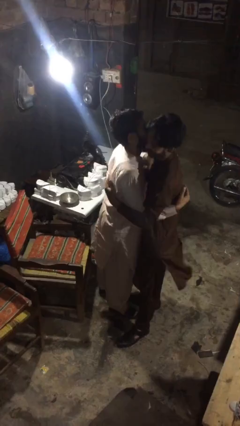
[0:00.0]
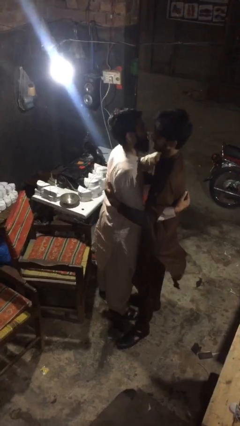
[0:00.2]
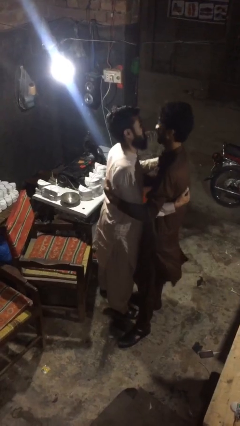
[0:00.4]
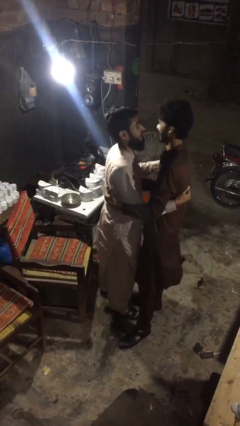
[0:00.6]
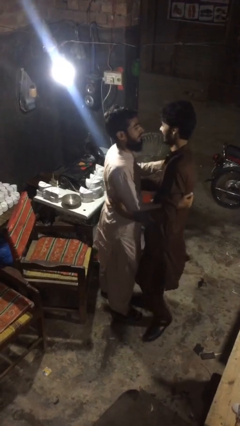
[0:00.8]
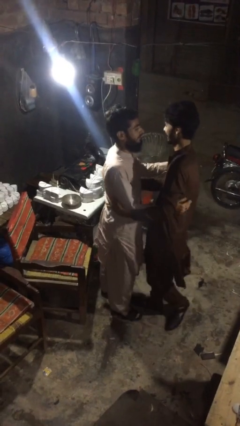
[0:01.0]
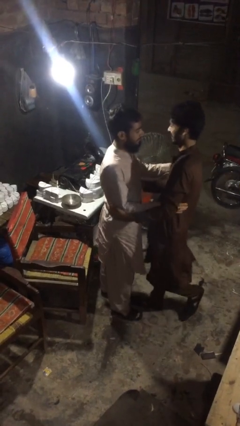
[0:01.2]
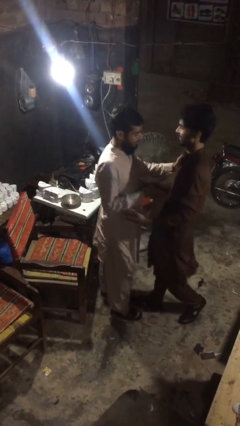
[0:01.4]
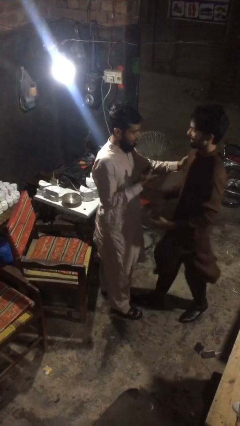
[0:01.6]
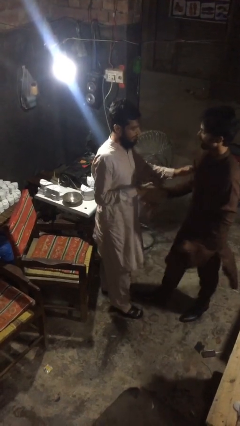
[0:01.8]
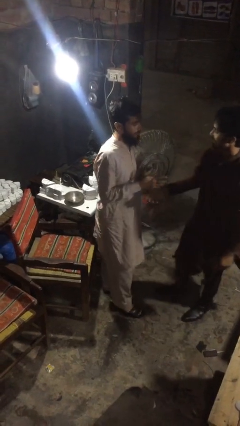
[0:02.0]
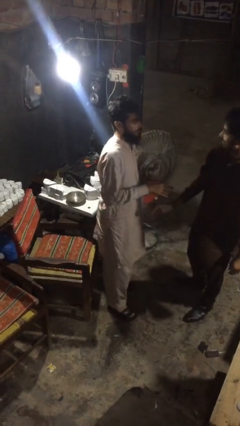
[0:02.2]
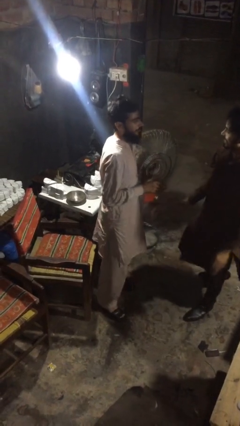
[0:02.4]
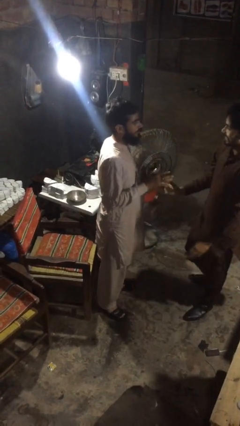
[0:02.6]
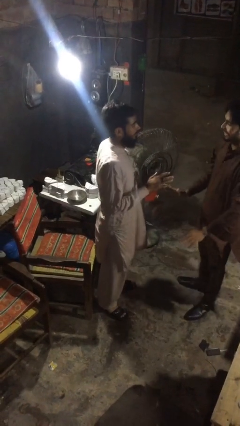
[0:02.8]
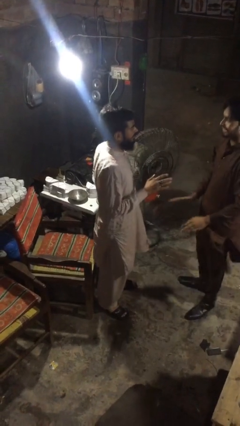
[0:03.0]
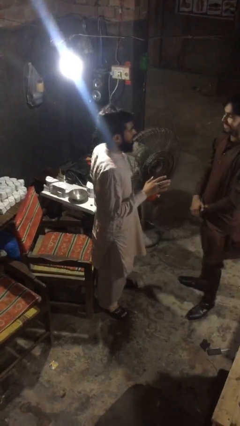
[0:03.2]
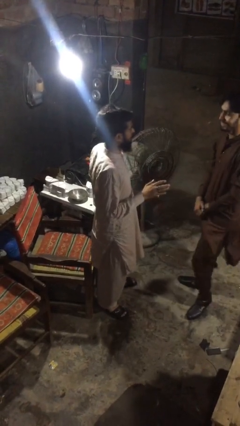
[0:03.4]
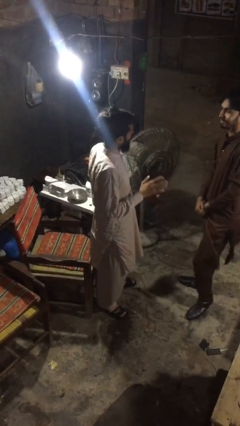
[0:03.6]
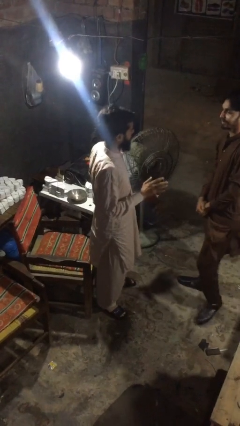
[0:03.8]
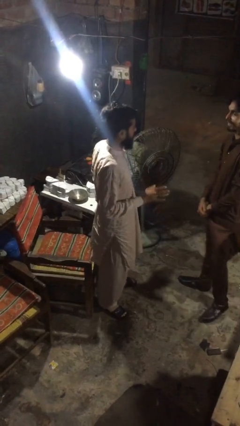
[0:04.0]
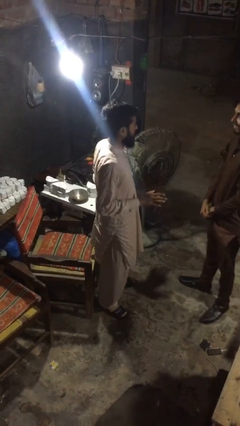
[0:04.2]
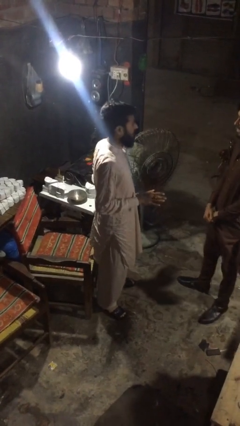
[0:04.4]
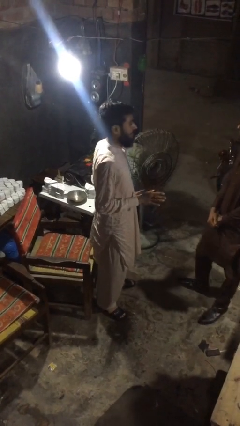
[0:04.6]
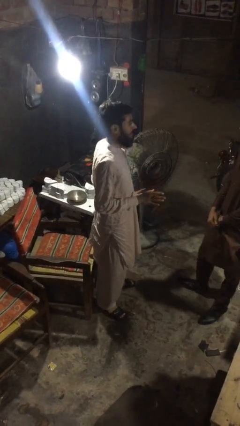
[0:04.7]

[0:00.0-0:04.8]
person talks to person

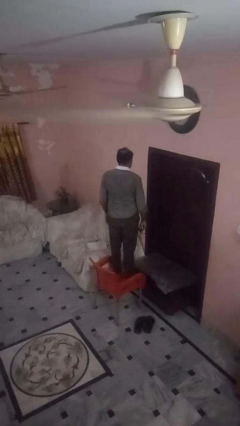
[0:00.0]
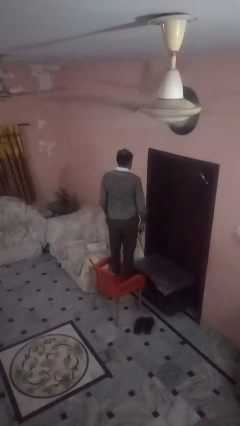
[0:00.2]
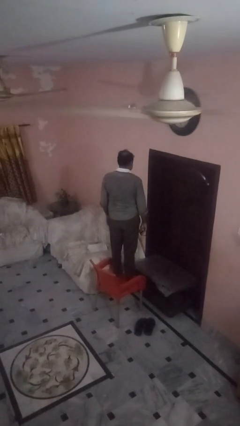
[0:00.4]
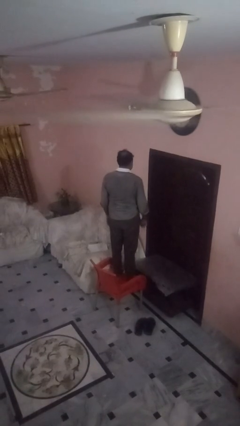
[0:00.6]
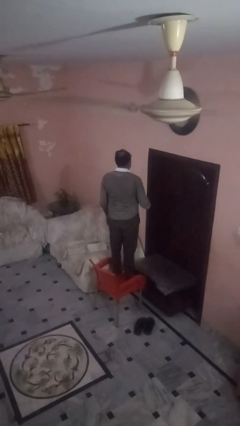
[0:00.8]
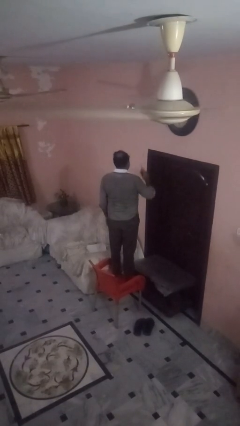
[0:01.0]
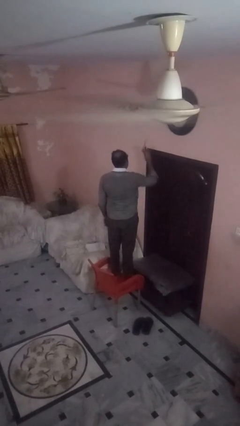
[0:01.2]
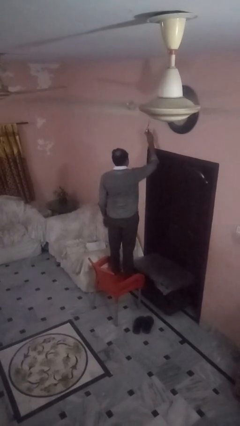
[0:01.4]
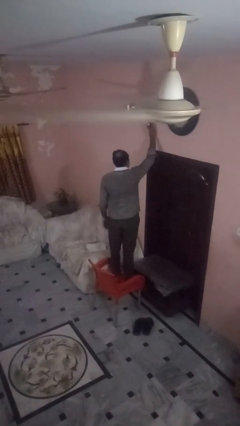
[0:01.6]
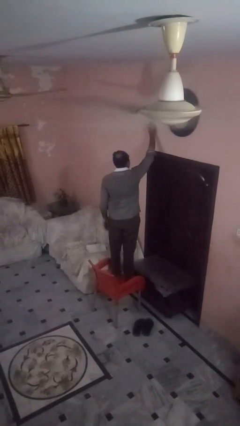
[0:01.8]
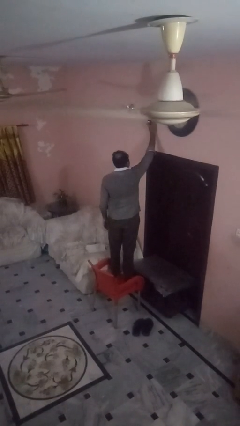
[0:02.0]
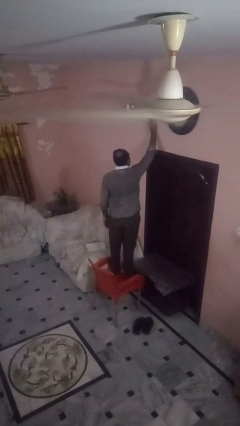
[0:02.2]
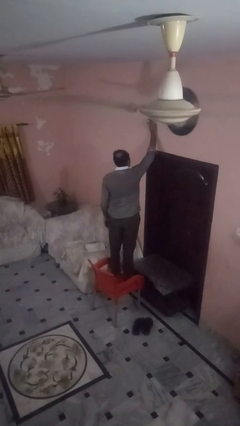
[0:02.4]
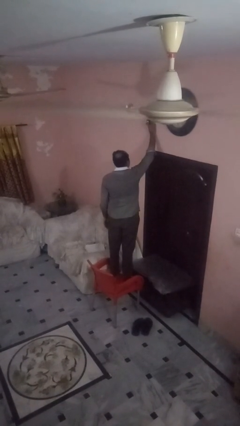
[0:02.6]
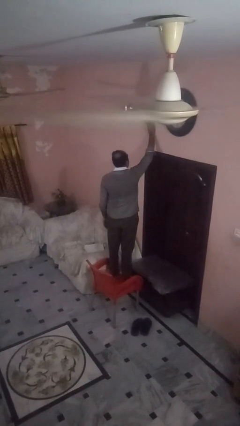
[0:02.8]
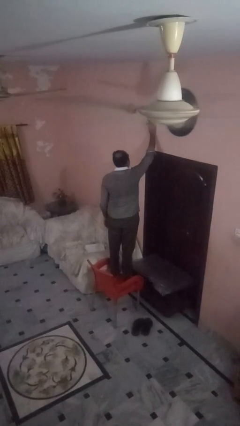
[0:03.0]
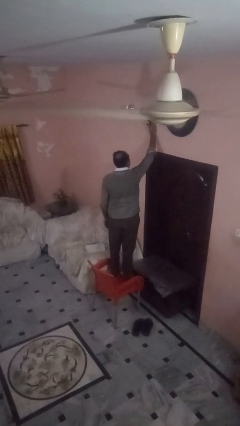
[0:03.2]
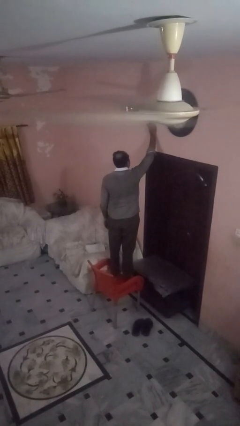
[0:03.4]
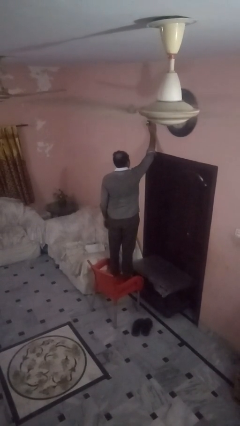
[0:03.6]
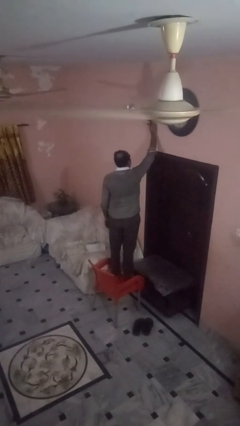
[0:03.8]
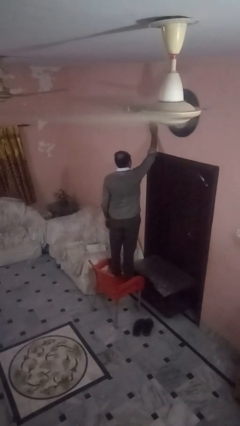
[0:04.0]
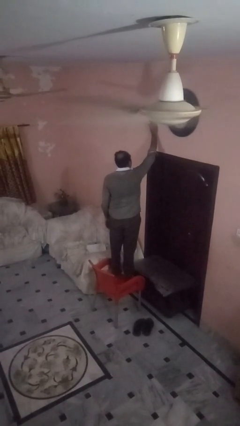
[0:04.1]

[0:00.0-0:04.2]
person puts up smoke detector

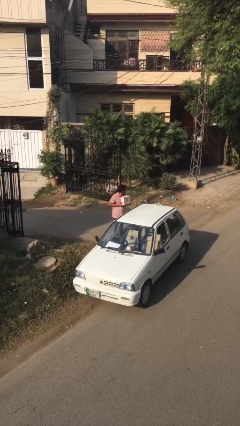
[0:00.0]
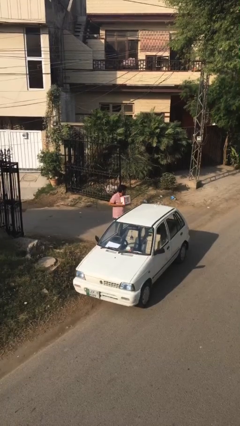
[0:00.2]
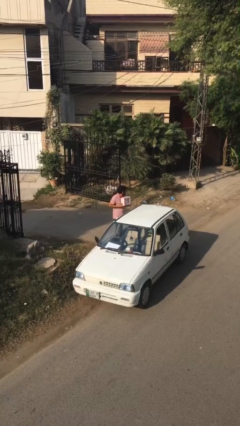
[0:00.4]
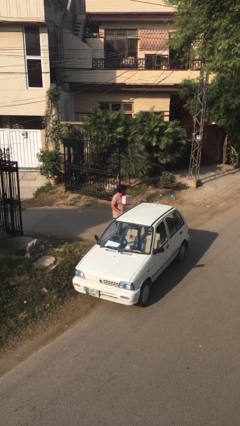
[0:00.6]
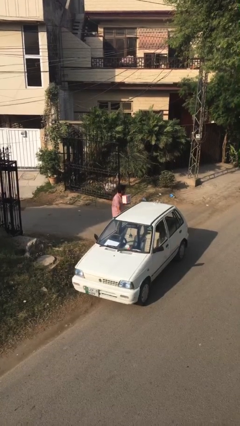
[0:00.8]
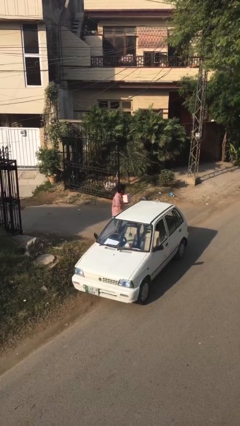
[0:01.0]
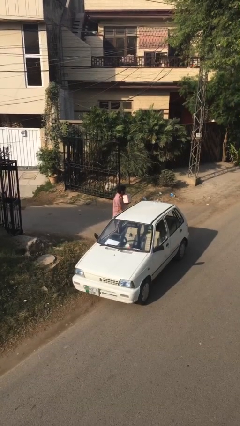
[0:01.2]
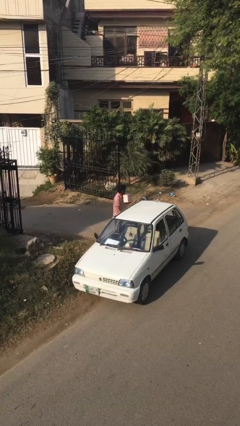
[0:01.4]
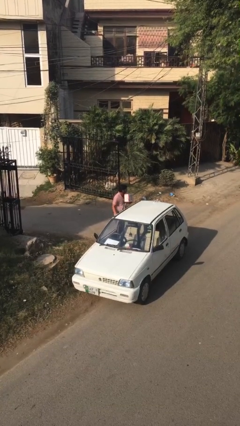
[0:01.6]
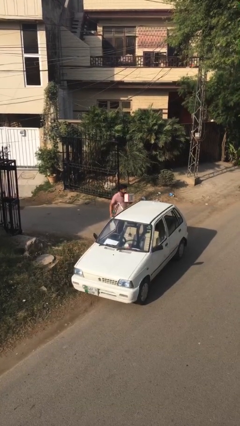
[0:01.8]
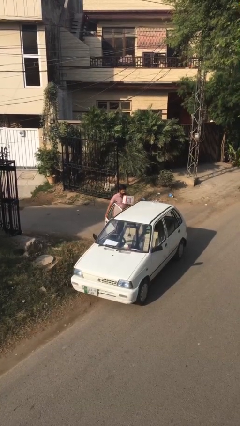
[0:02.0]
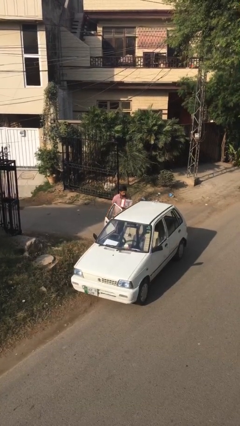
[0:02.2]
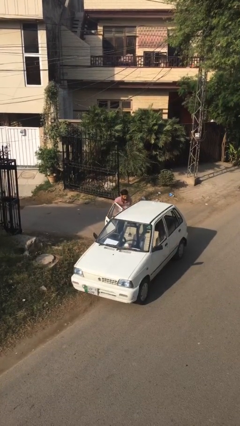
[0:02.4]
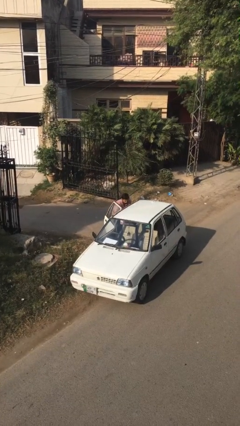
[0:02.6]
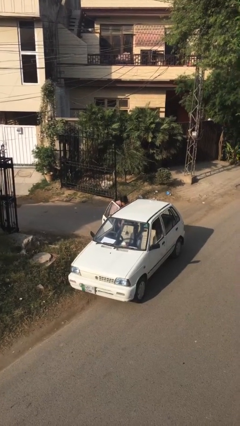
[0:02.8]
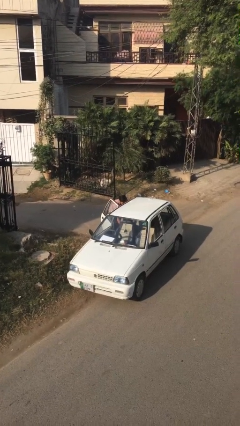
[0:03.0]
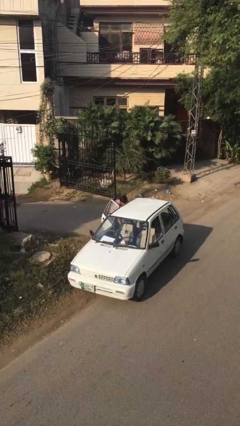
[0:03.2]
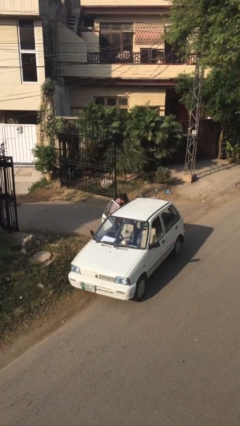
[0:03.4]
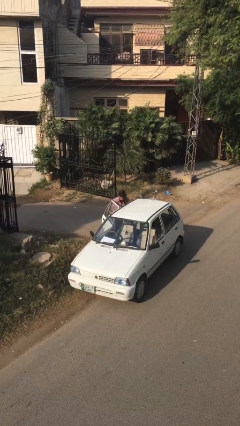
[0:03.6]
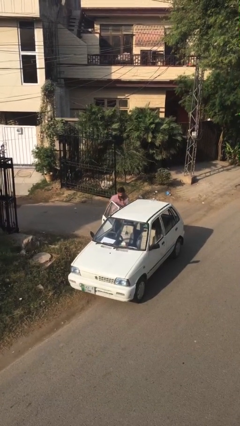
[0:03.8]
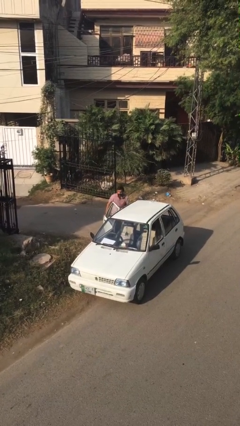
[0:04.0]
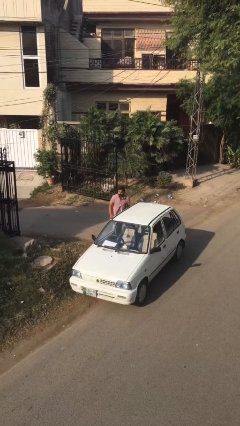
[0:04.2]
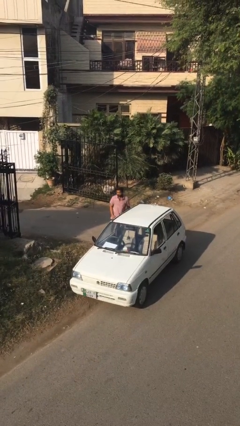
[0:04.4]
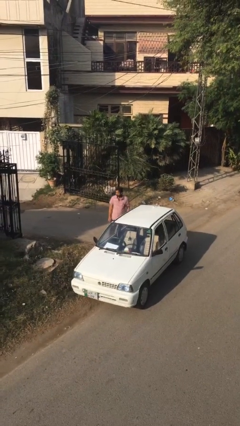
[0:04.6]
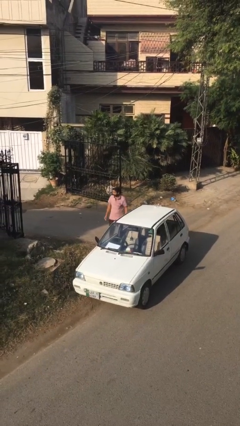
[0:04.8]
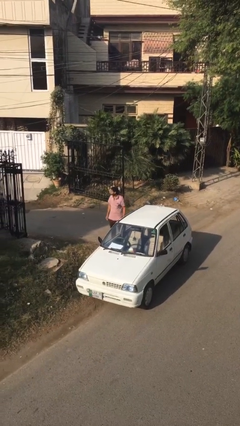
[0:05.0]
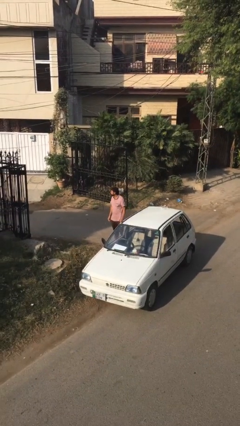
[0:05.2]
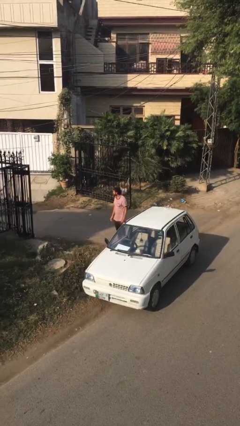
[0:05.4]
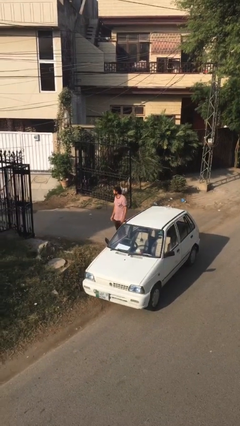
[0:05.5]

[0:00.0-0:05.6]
person loads car

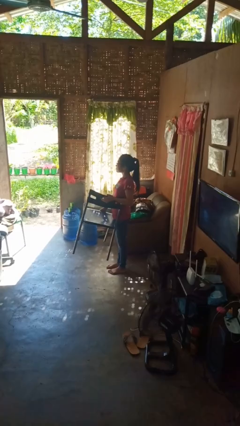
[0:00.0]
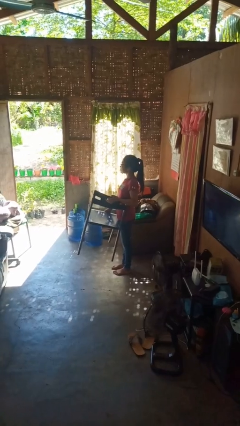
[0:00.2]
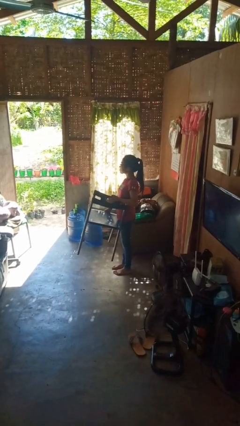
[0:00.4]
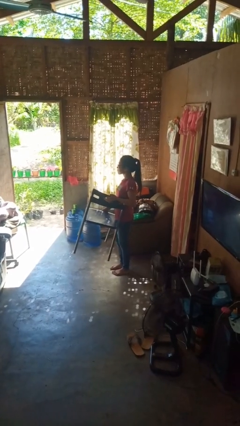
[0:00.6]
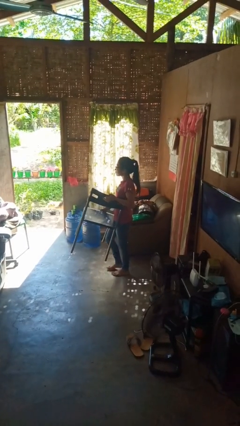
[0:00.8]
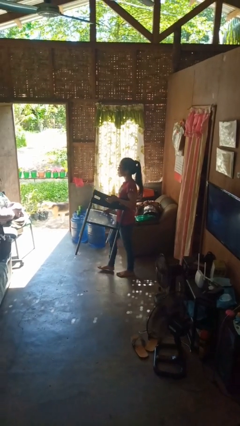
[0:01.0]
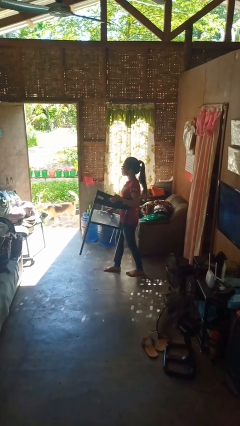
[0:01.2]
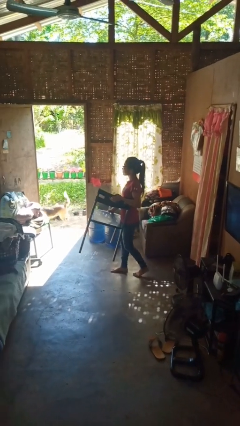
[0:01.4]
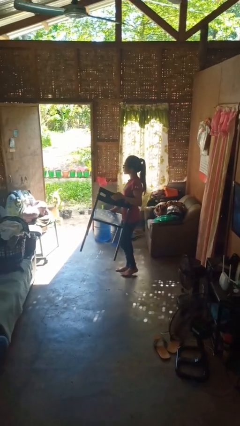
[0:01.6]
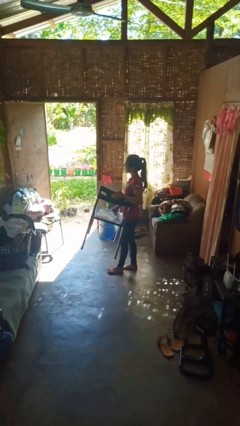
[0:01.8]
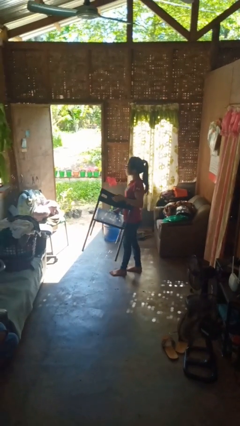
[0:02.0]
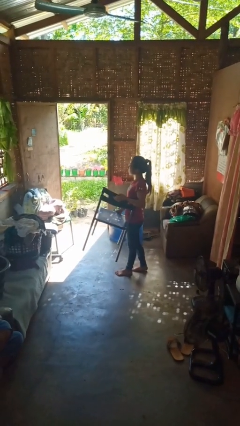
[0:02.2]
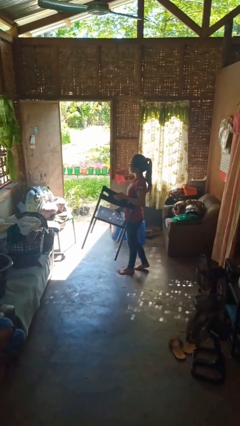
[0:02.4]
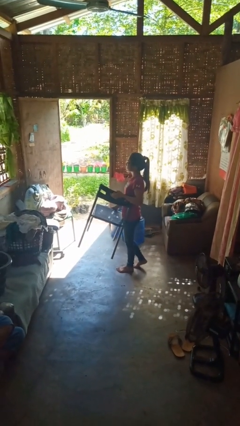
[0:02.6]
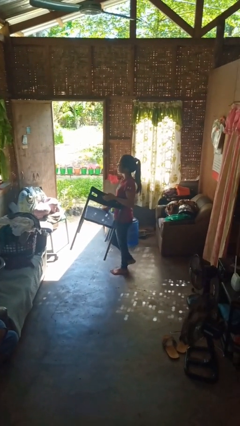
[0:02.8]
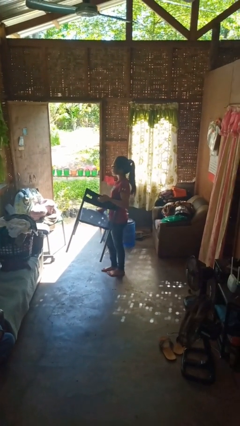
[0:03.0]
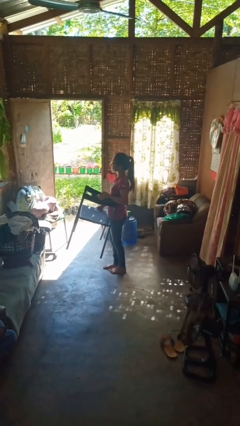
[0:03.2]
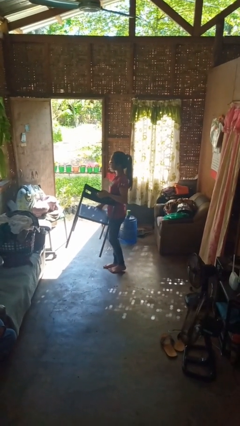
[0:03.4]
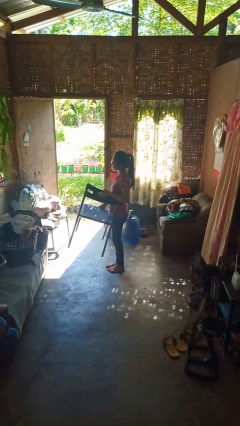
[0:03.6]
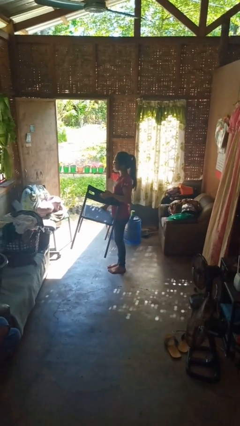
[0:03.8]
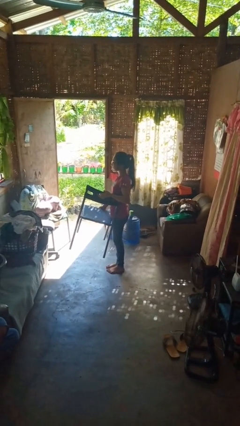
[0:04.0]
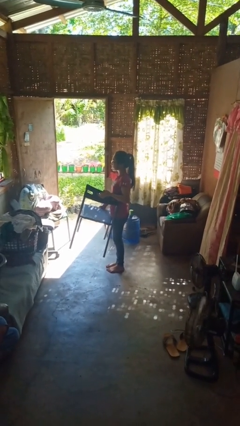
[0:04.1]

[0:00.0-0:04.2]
person carries furniture
